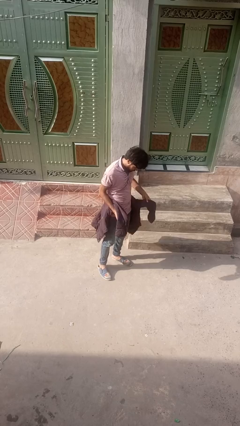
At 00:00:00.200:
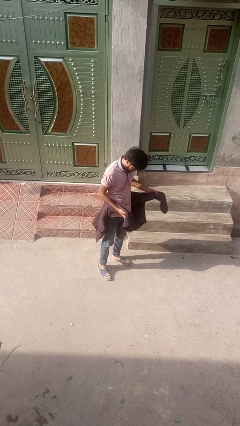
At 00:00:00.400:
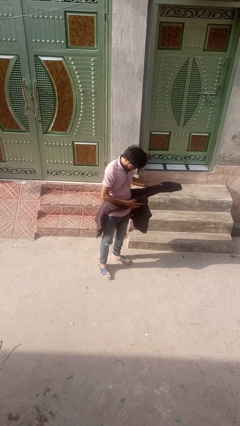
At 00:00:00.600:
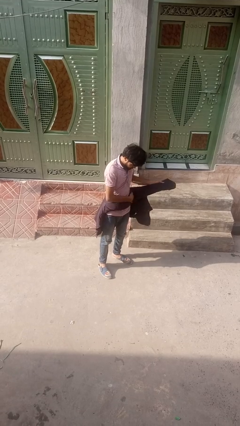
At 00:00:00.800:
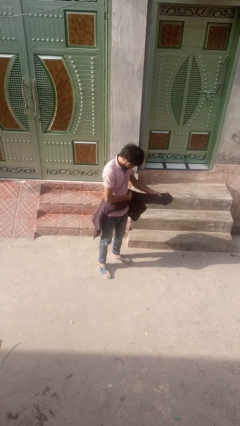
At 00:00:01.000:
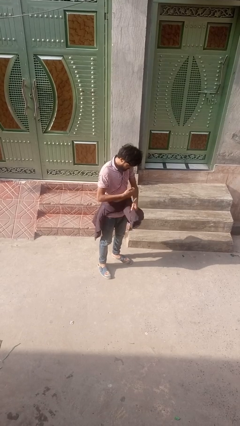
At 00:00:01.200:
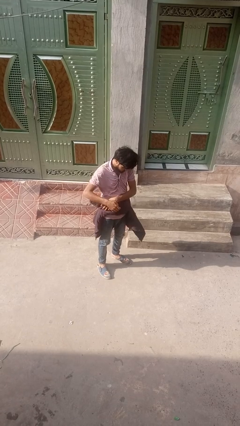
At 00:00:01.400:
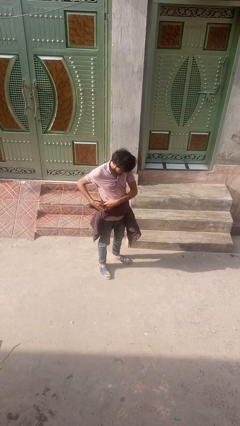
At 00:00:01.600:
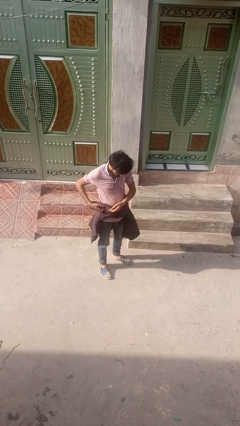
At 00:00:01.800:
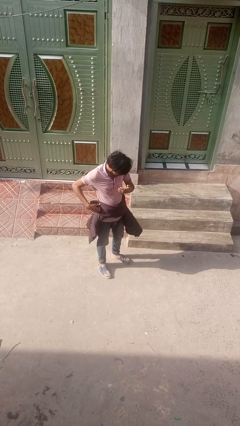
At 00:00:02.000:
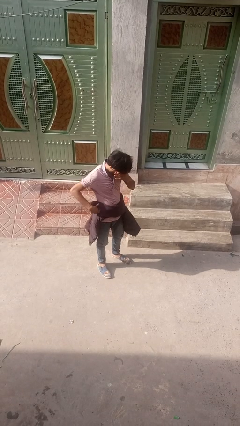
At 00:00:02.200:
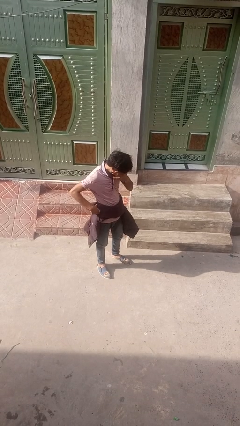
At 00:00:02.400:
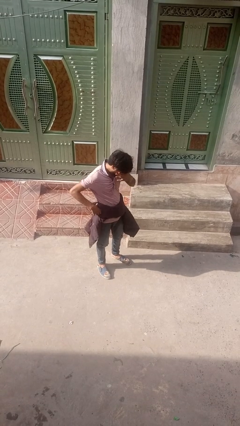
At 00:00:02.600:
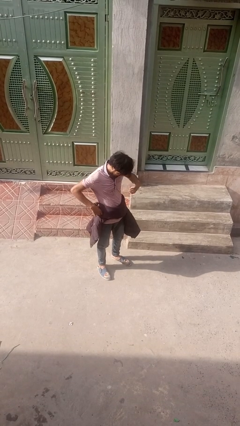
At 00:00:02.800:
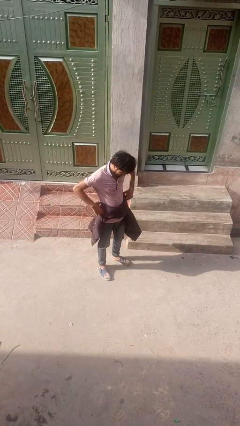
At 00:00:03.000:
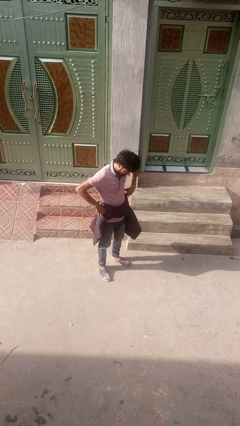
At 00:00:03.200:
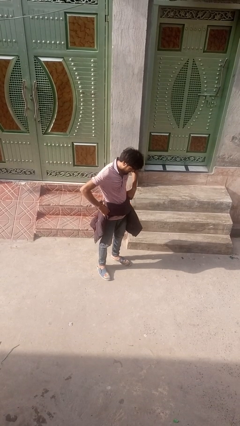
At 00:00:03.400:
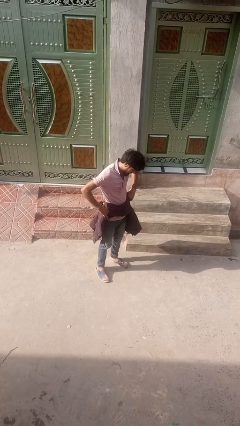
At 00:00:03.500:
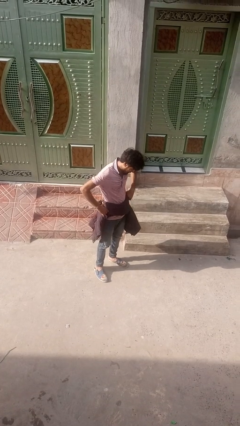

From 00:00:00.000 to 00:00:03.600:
person ties jacket around waist

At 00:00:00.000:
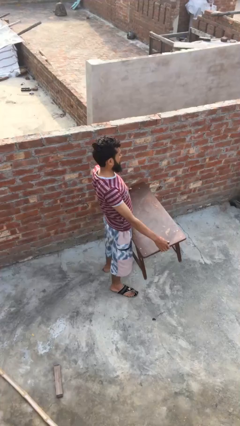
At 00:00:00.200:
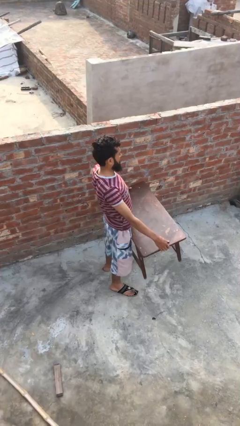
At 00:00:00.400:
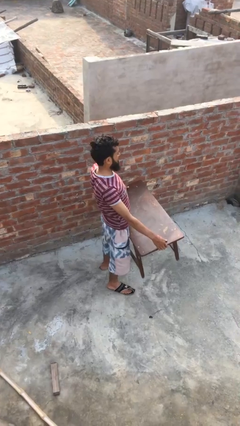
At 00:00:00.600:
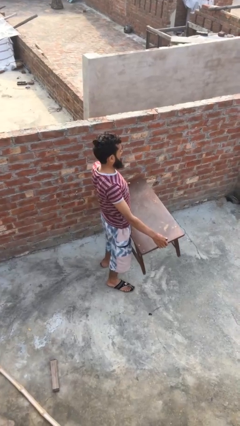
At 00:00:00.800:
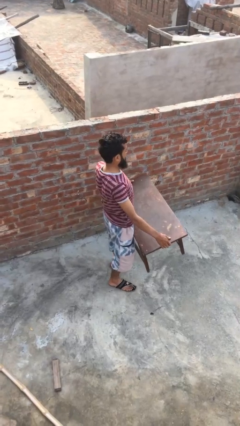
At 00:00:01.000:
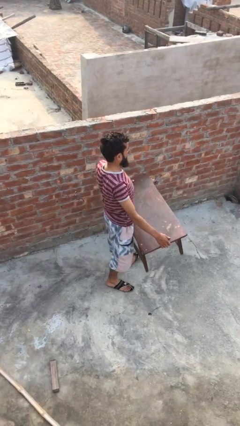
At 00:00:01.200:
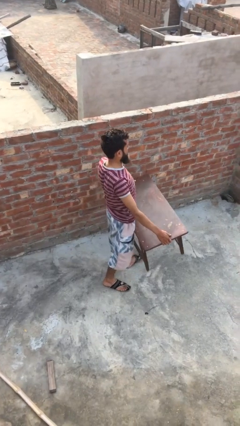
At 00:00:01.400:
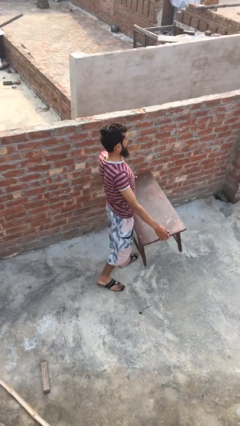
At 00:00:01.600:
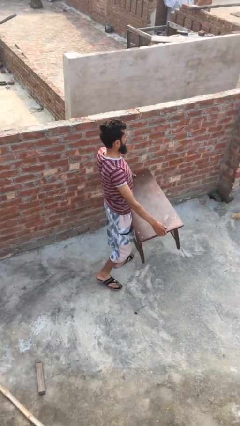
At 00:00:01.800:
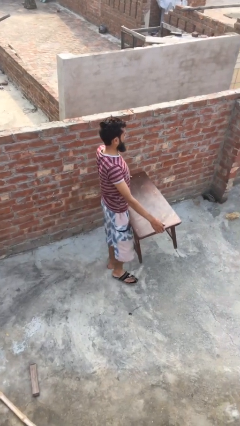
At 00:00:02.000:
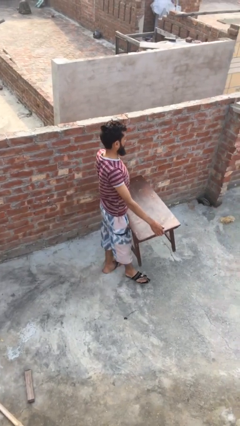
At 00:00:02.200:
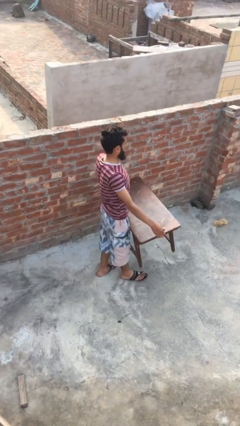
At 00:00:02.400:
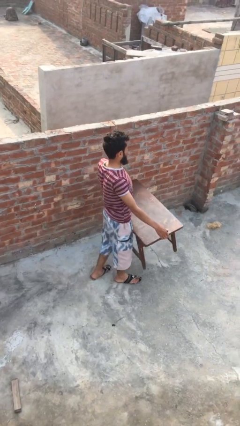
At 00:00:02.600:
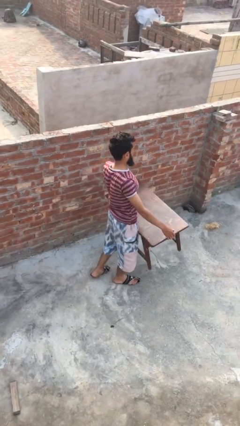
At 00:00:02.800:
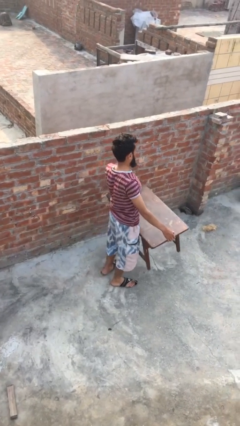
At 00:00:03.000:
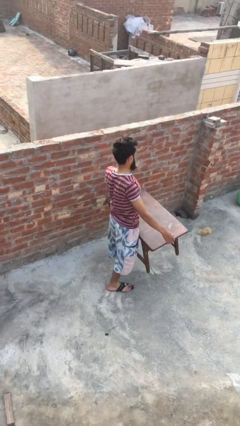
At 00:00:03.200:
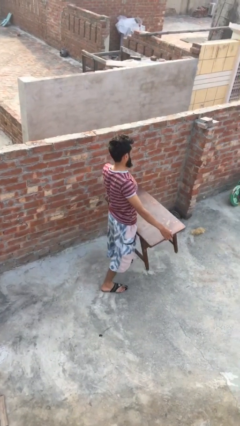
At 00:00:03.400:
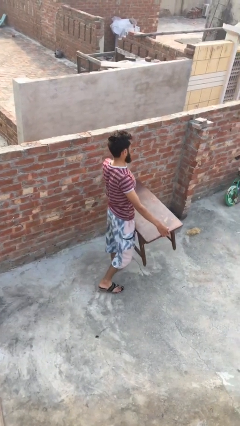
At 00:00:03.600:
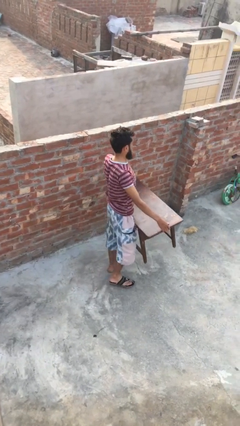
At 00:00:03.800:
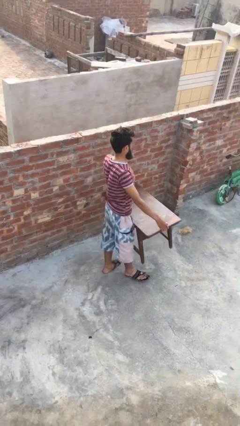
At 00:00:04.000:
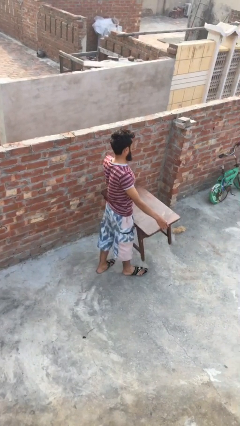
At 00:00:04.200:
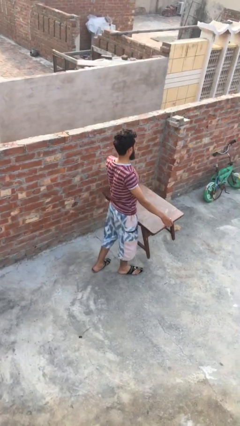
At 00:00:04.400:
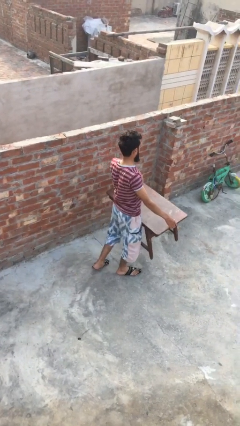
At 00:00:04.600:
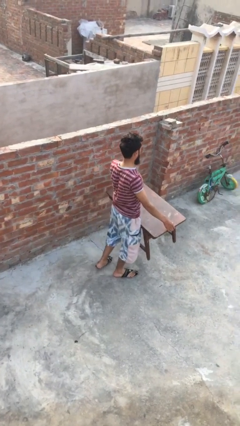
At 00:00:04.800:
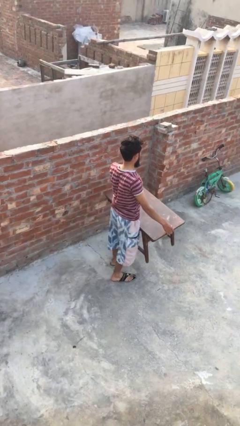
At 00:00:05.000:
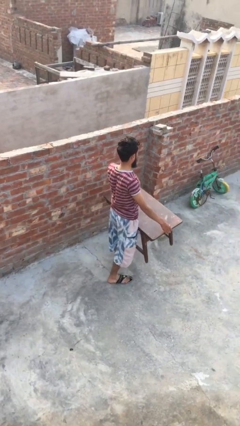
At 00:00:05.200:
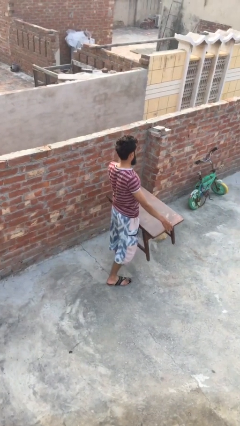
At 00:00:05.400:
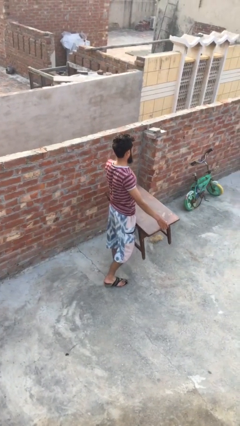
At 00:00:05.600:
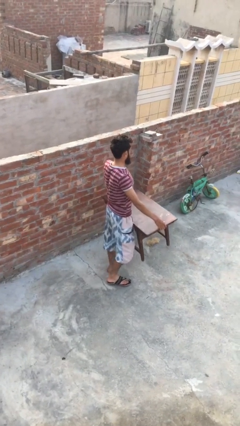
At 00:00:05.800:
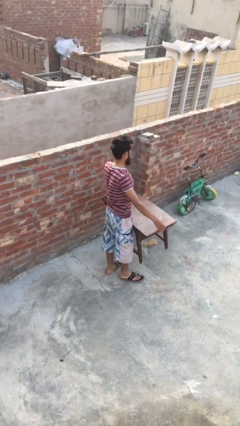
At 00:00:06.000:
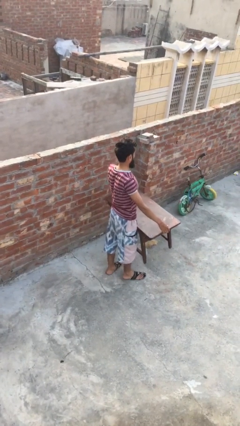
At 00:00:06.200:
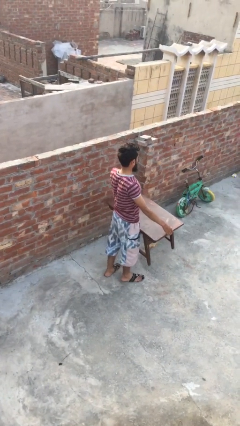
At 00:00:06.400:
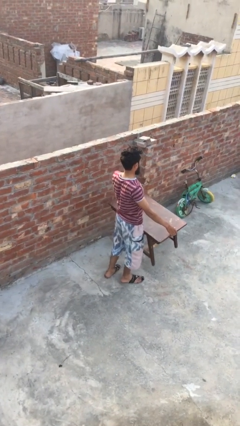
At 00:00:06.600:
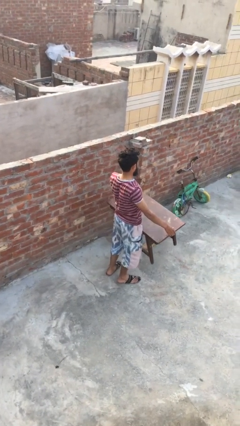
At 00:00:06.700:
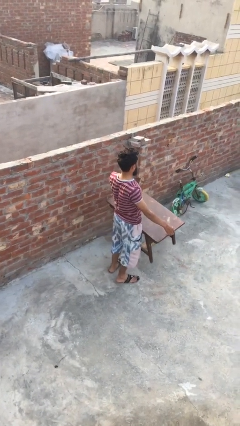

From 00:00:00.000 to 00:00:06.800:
person carries heavy object

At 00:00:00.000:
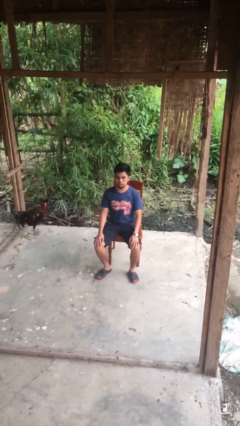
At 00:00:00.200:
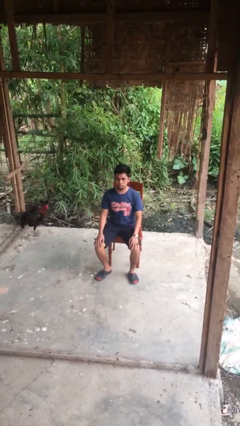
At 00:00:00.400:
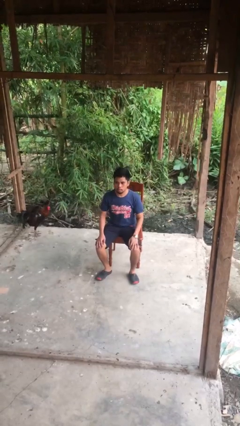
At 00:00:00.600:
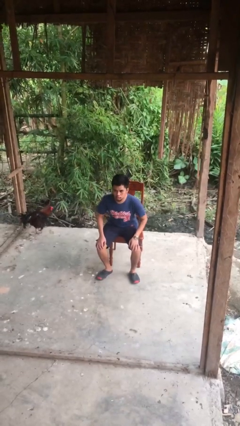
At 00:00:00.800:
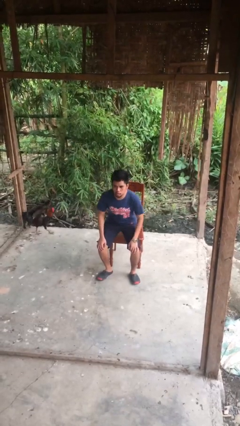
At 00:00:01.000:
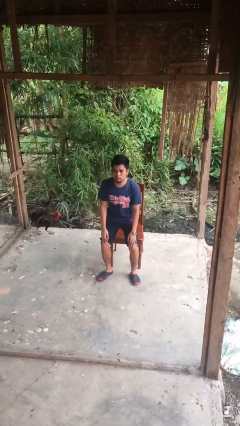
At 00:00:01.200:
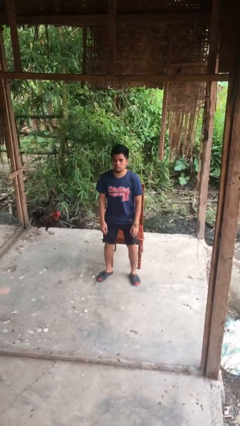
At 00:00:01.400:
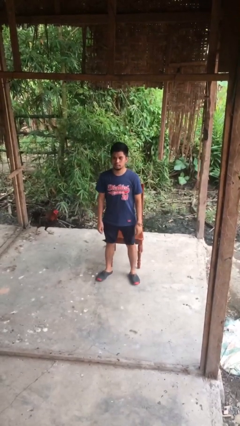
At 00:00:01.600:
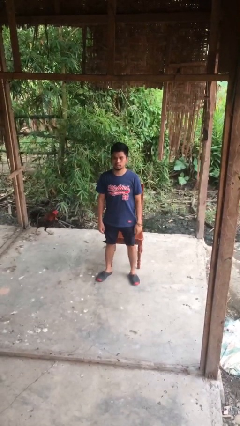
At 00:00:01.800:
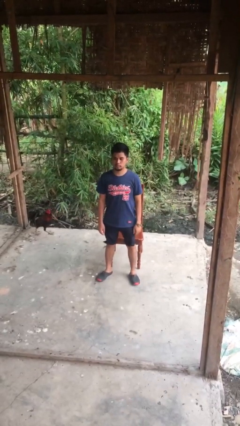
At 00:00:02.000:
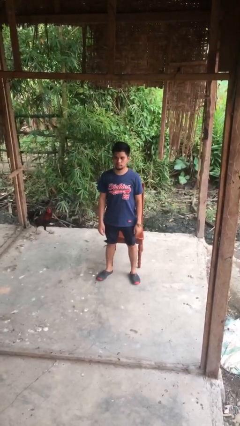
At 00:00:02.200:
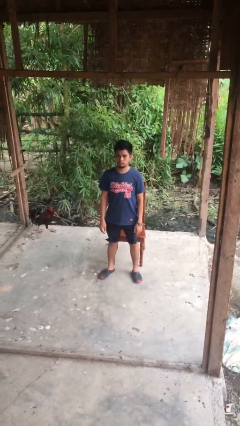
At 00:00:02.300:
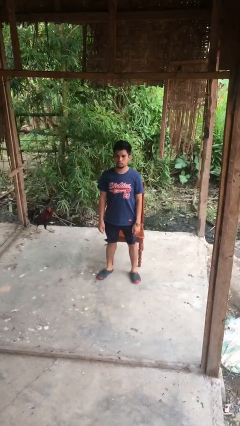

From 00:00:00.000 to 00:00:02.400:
person stands up

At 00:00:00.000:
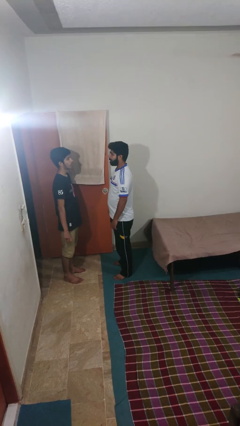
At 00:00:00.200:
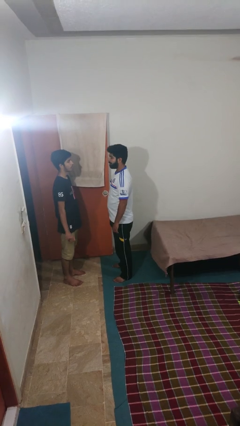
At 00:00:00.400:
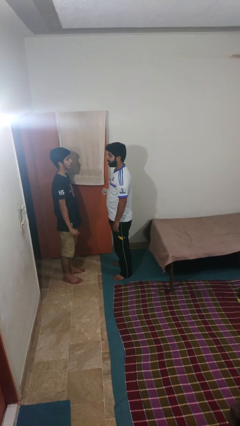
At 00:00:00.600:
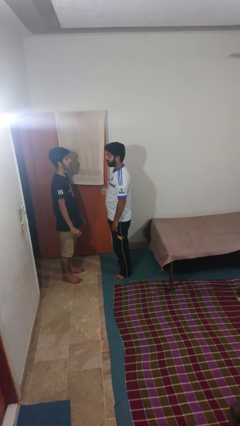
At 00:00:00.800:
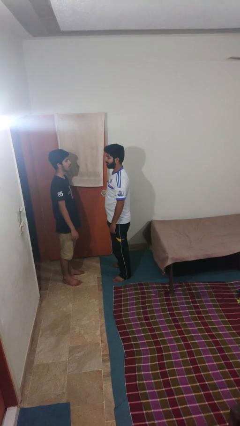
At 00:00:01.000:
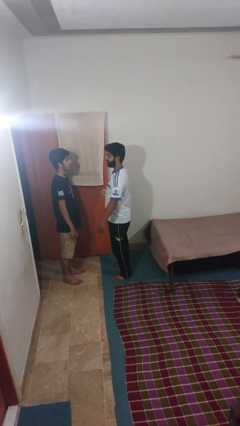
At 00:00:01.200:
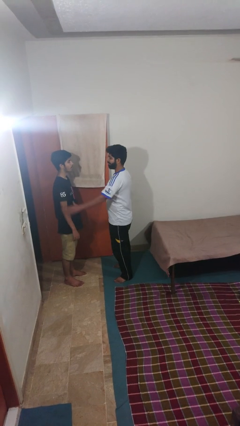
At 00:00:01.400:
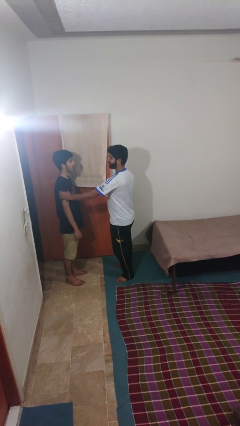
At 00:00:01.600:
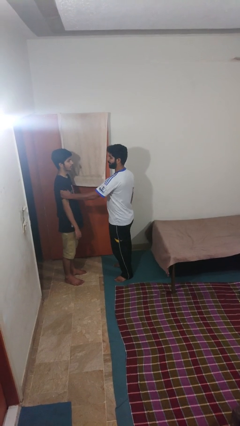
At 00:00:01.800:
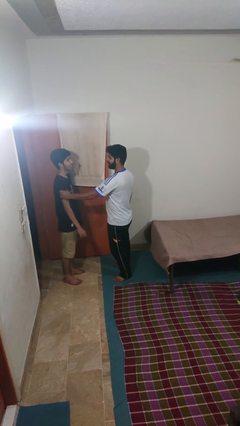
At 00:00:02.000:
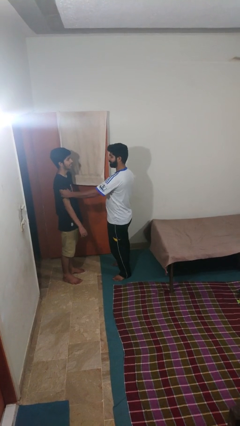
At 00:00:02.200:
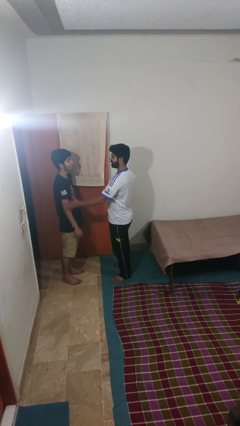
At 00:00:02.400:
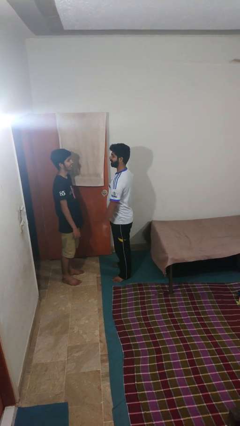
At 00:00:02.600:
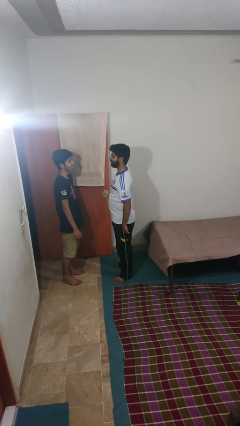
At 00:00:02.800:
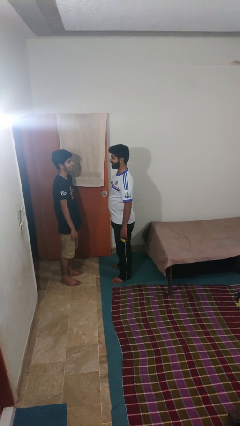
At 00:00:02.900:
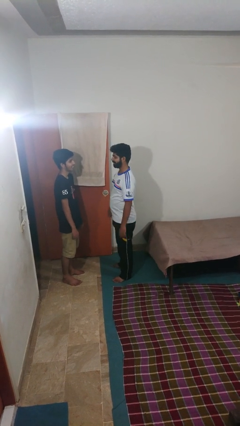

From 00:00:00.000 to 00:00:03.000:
person grabs person by bicep

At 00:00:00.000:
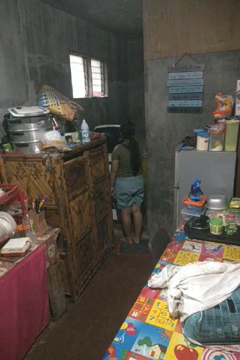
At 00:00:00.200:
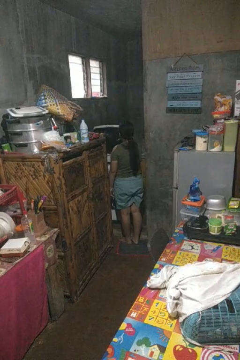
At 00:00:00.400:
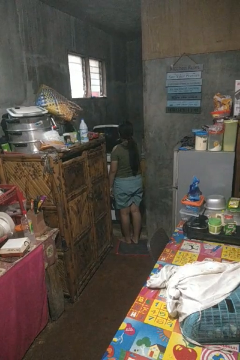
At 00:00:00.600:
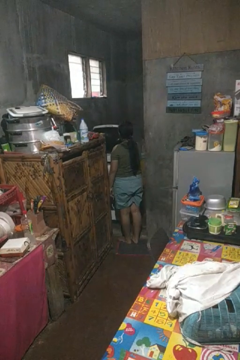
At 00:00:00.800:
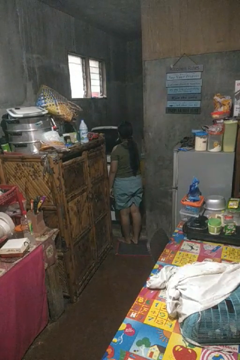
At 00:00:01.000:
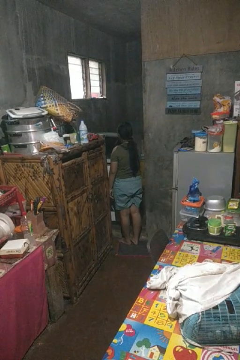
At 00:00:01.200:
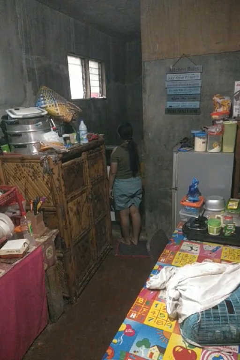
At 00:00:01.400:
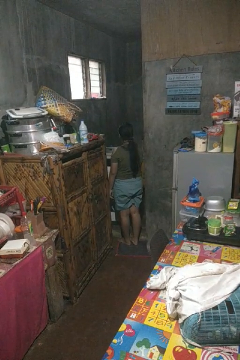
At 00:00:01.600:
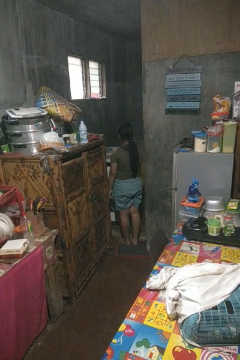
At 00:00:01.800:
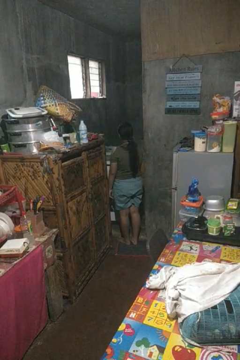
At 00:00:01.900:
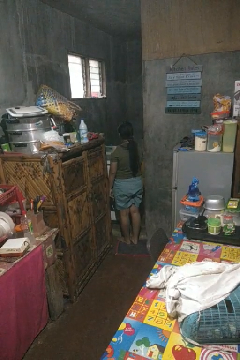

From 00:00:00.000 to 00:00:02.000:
person closes clothes washer

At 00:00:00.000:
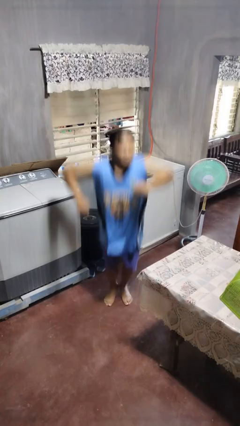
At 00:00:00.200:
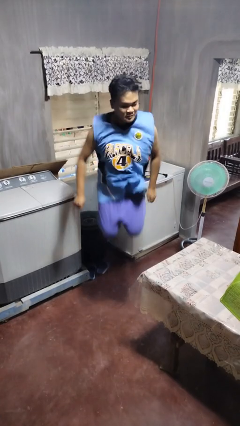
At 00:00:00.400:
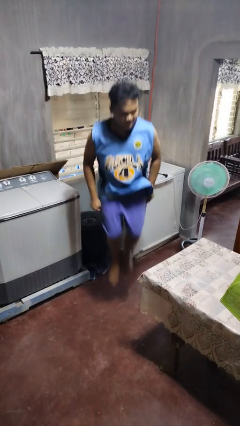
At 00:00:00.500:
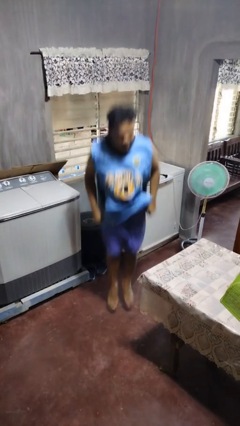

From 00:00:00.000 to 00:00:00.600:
person jumps
